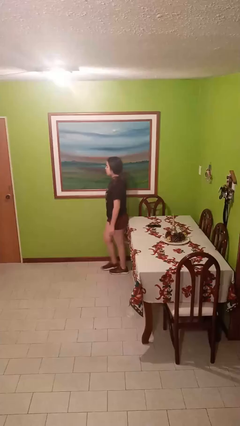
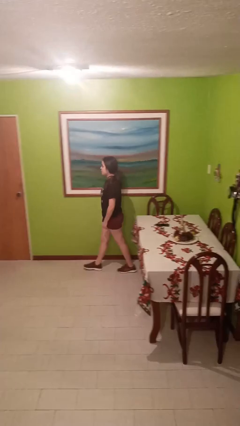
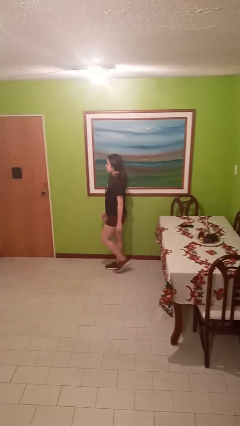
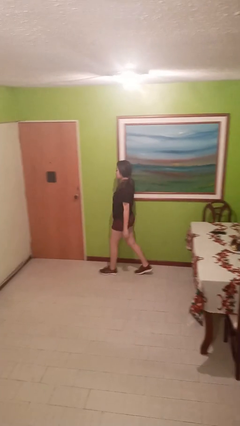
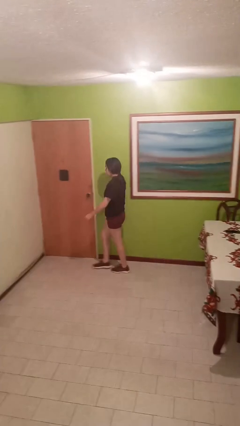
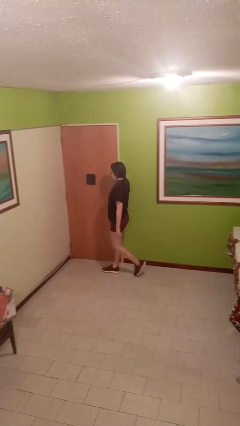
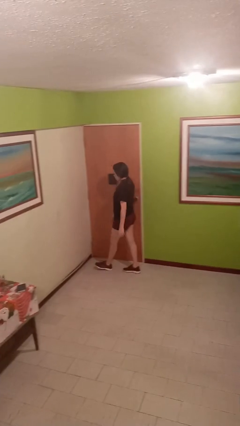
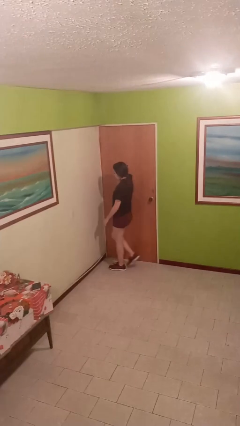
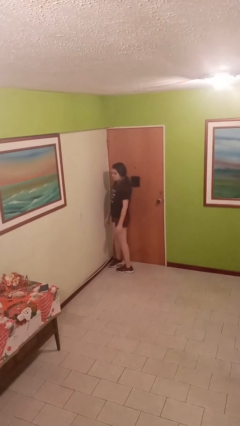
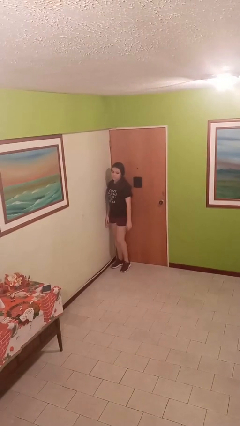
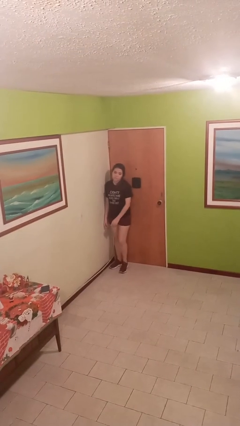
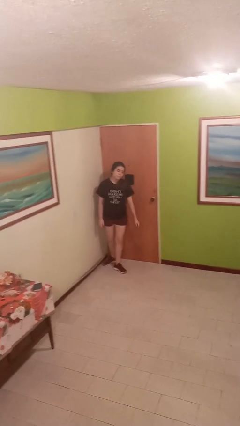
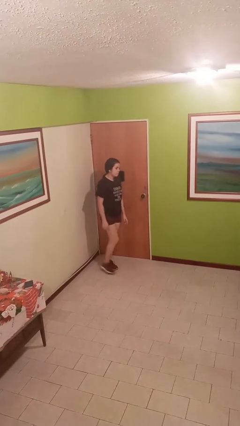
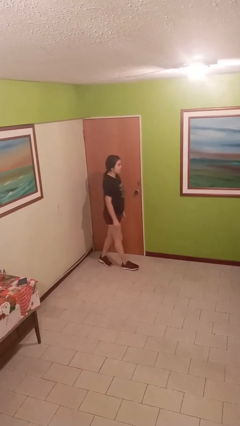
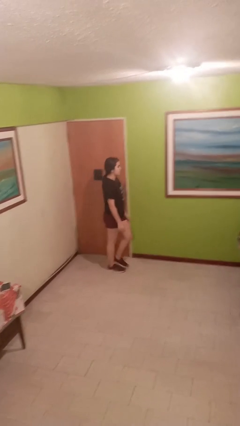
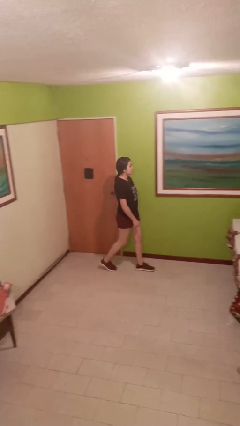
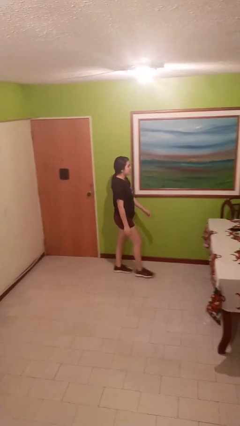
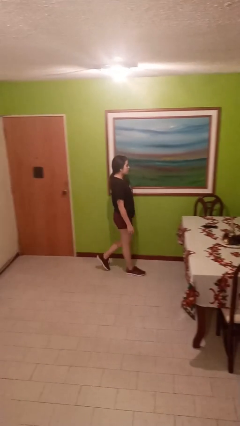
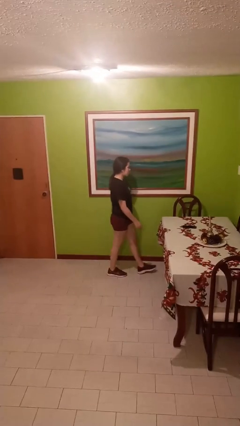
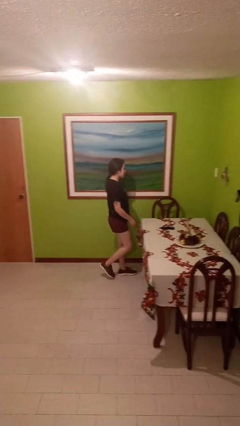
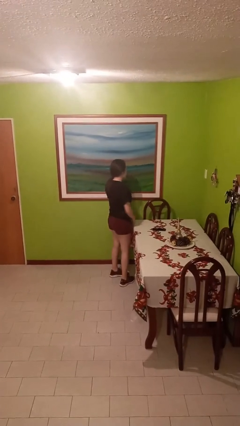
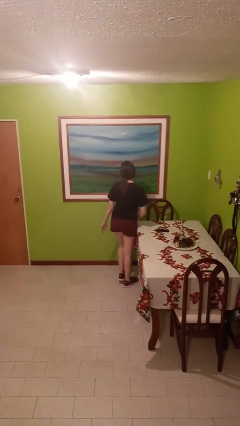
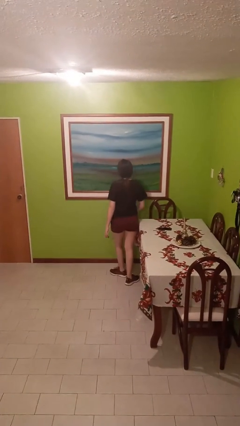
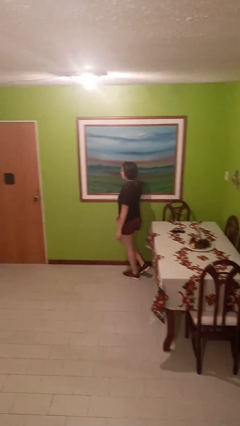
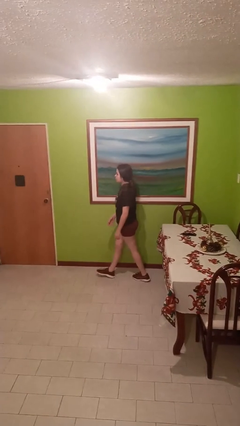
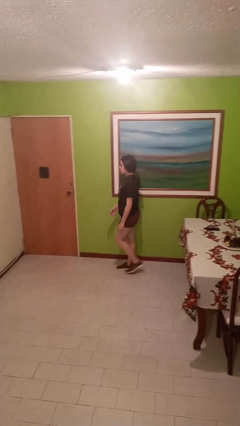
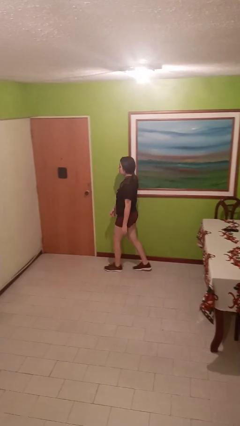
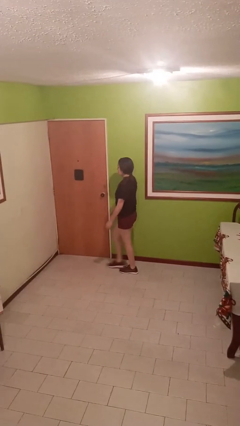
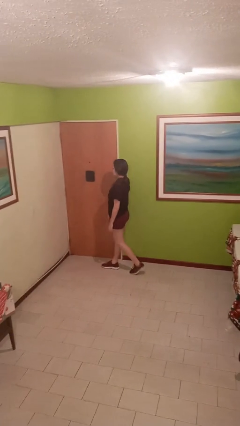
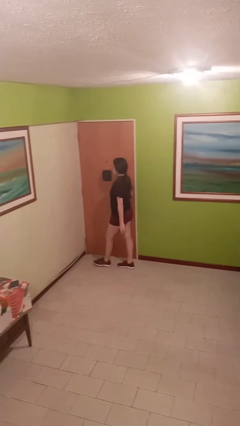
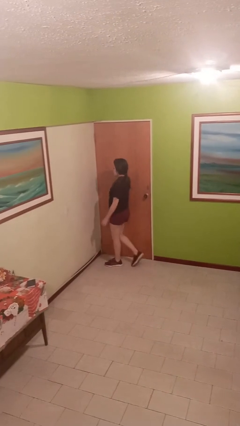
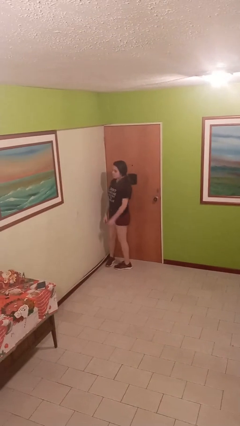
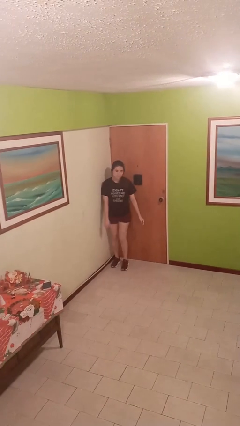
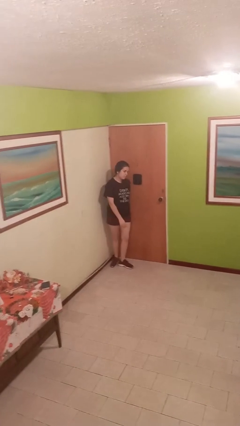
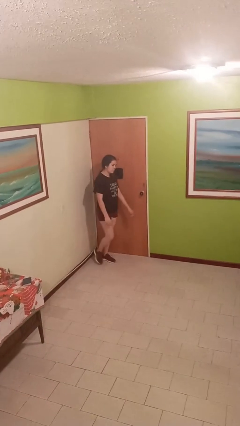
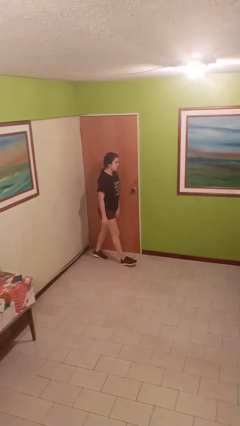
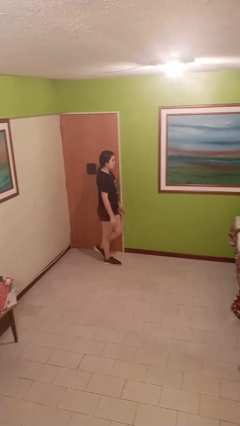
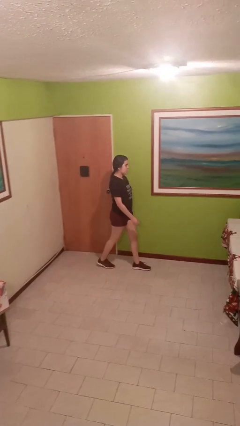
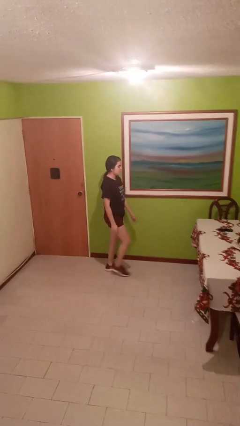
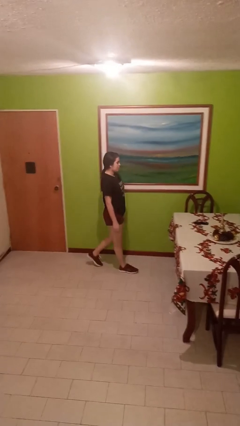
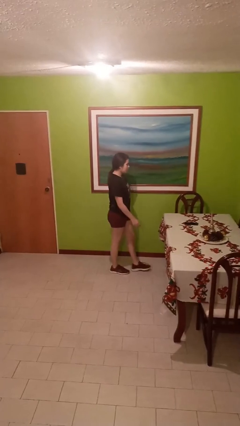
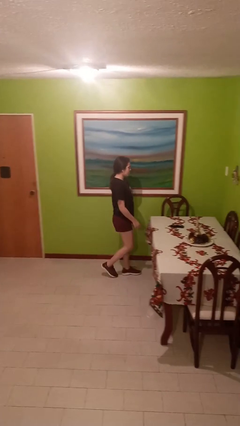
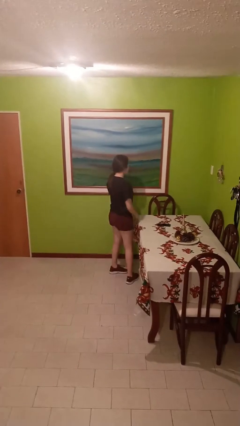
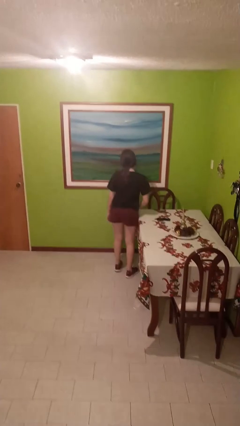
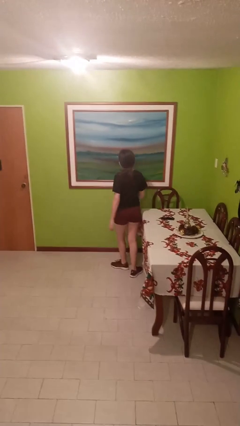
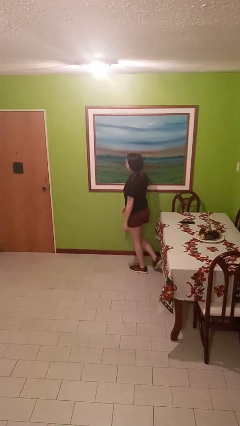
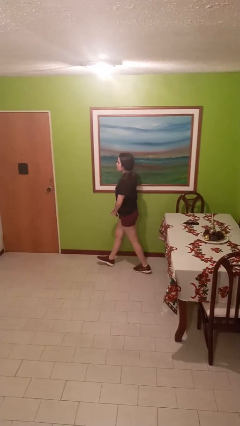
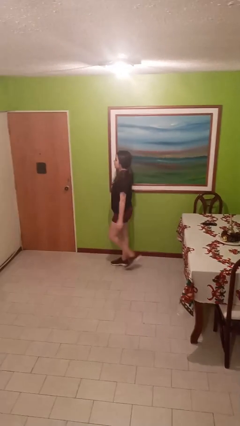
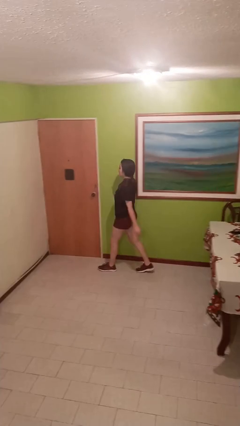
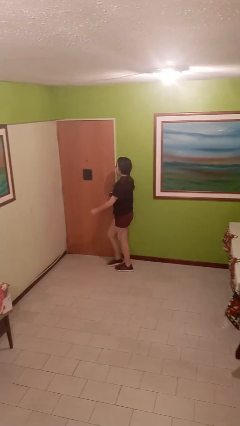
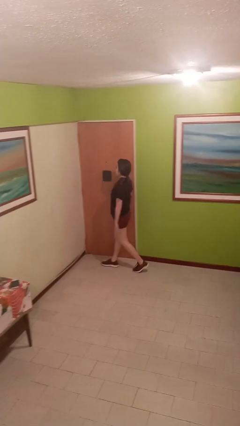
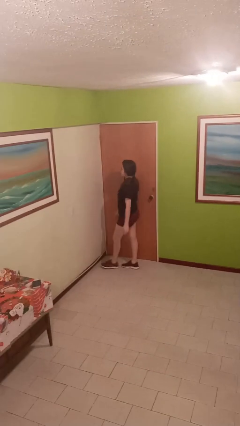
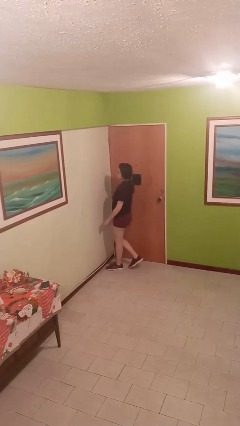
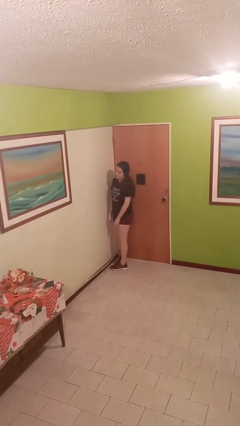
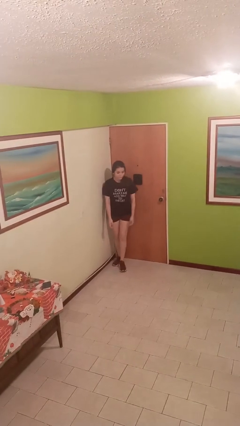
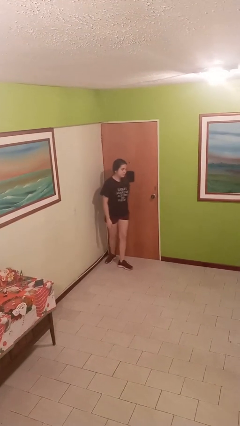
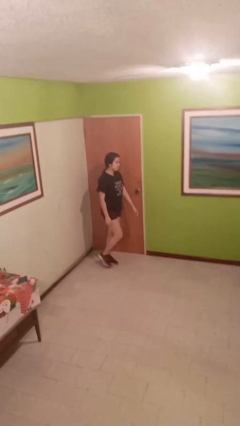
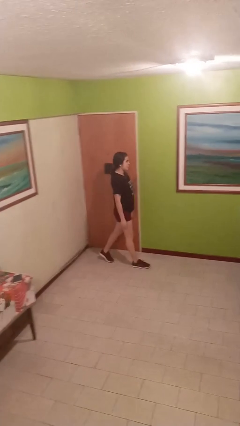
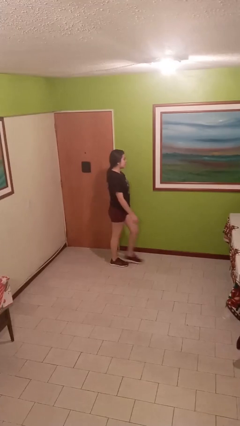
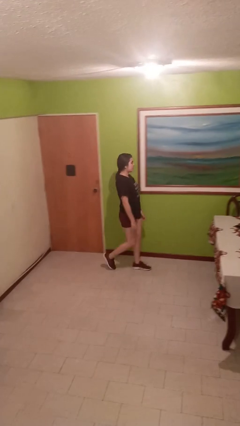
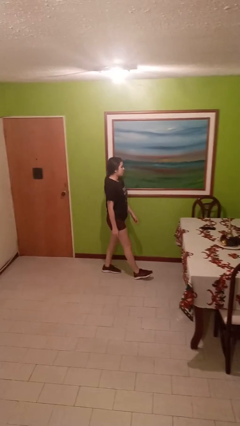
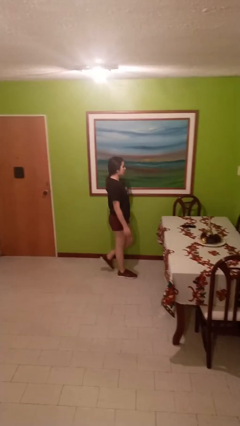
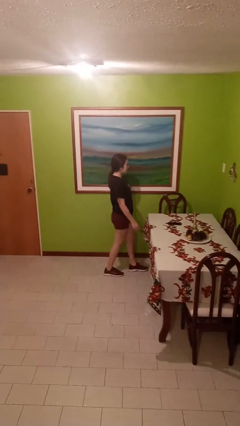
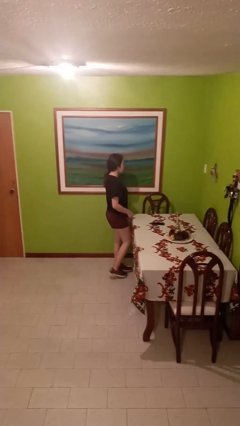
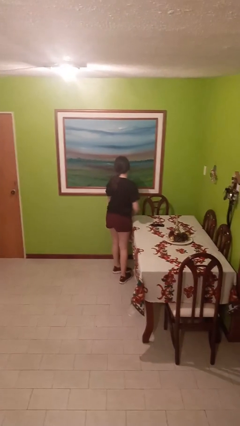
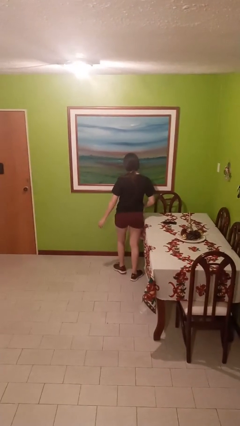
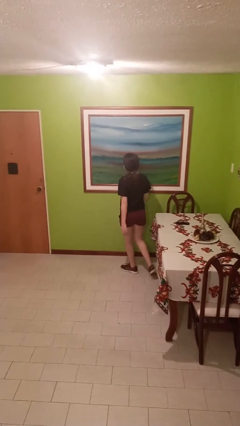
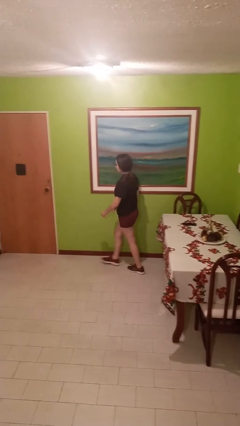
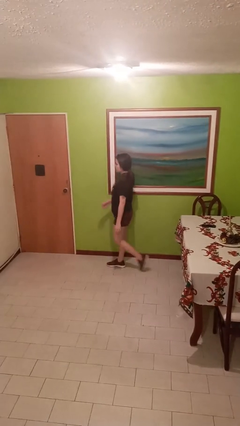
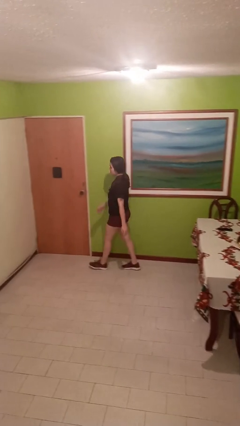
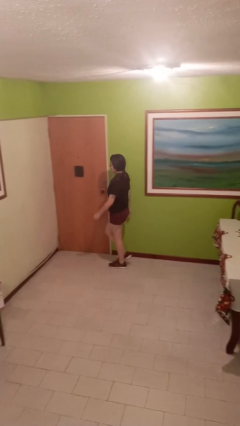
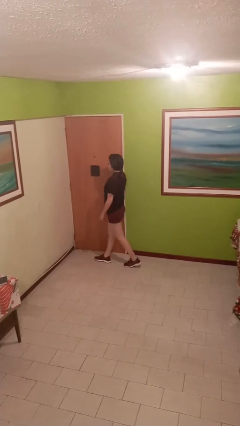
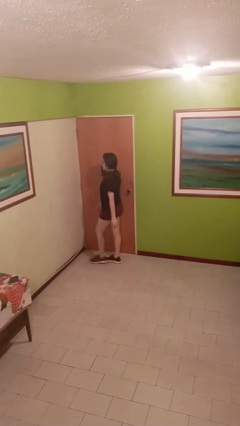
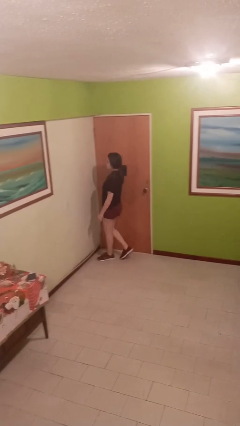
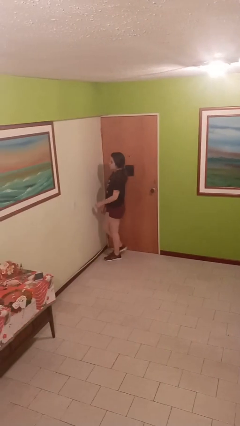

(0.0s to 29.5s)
person walks

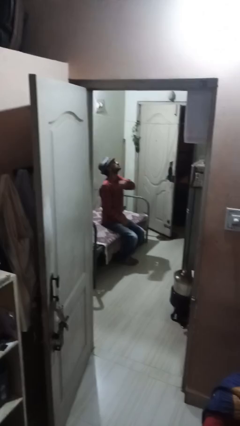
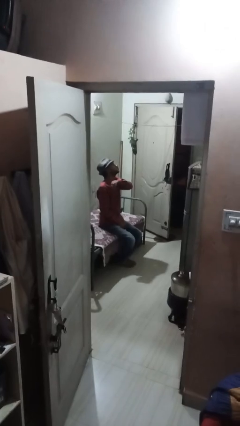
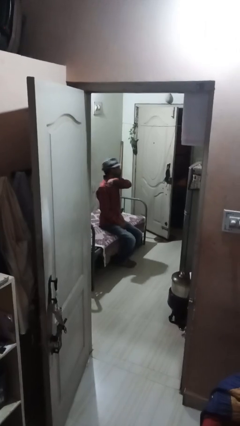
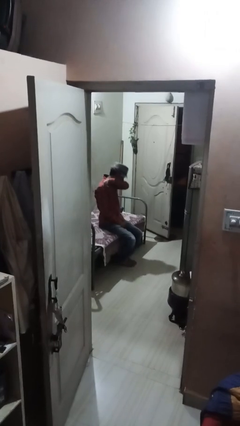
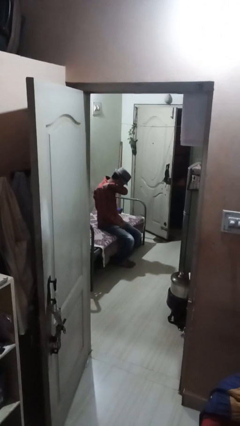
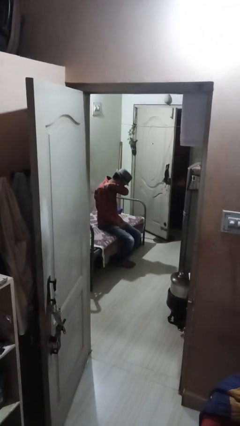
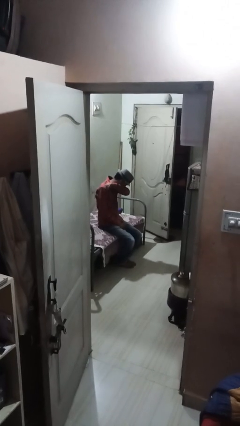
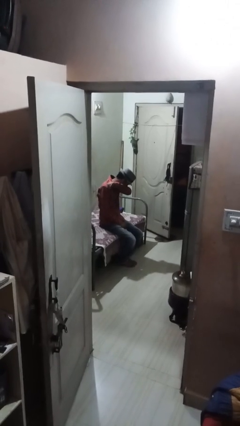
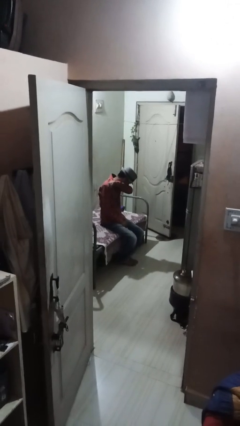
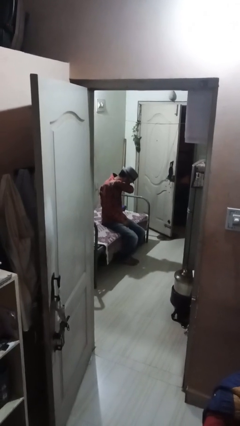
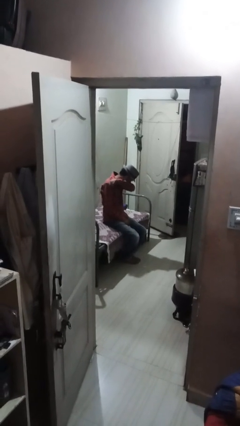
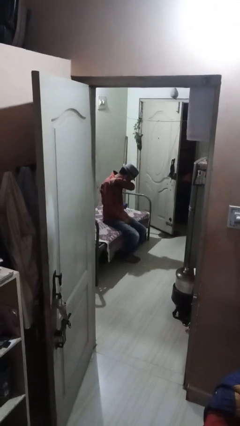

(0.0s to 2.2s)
person sneezes into arm

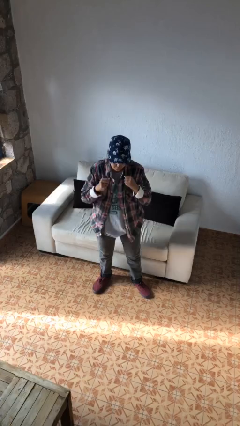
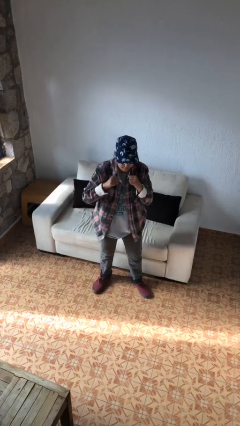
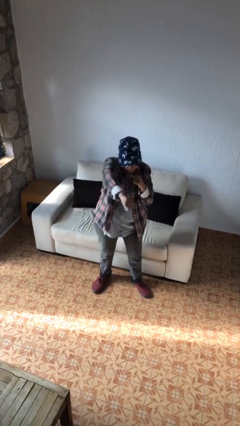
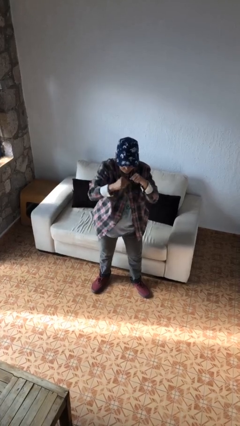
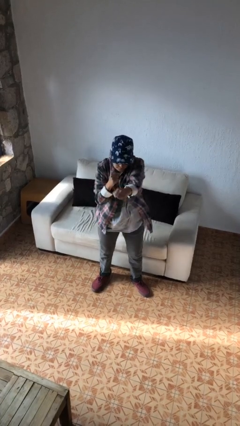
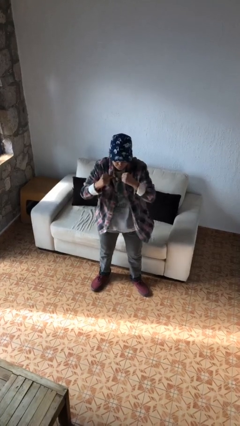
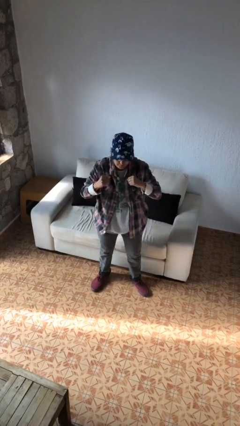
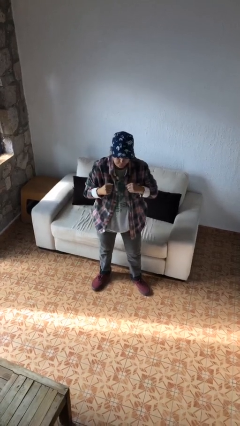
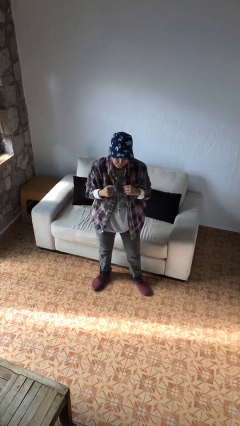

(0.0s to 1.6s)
person punches
